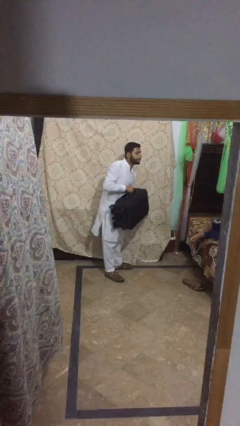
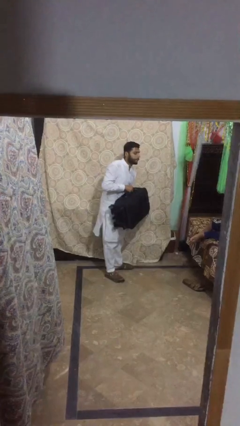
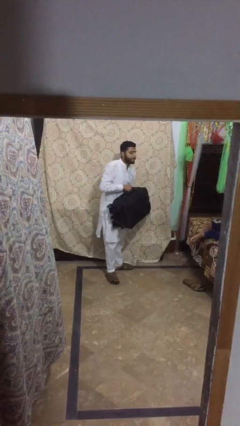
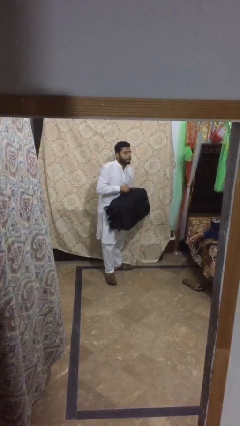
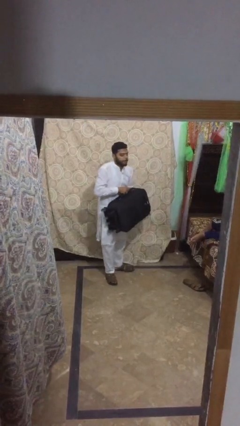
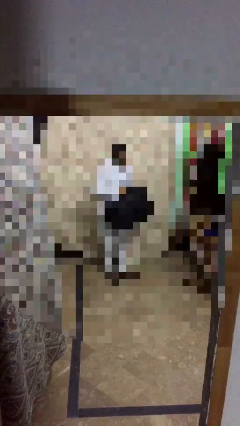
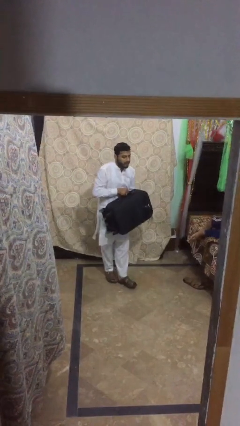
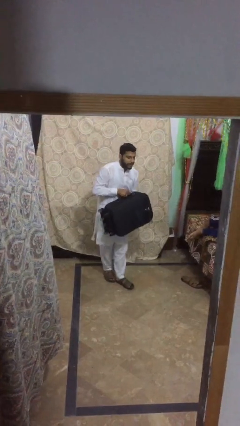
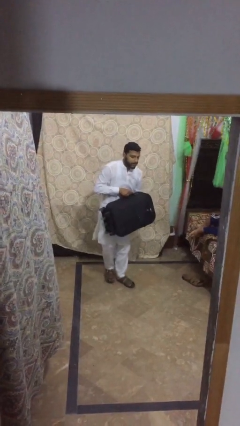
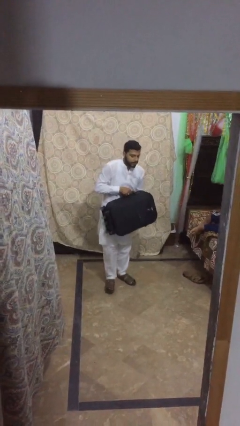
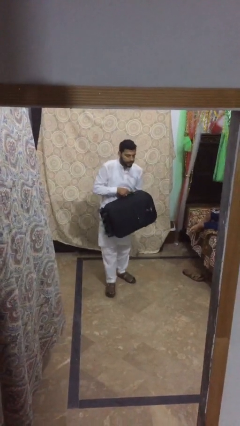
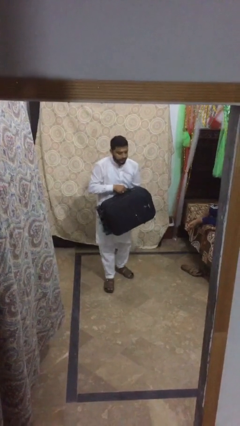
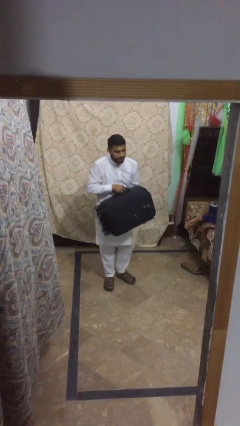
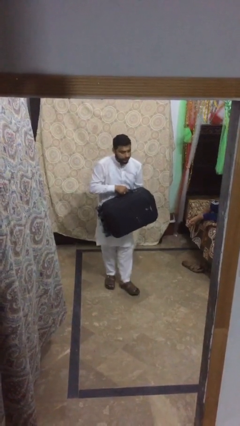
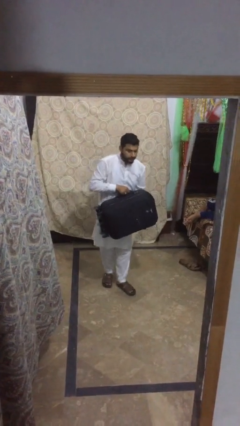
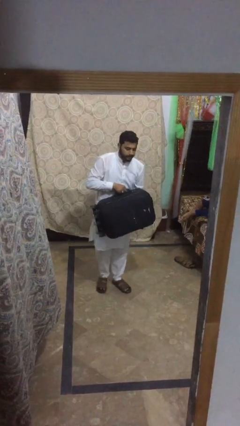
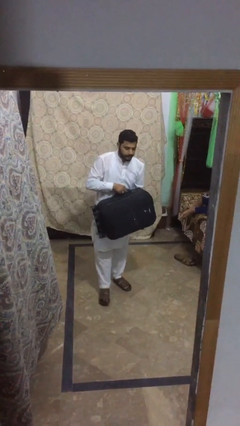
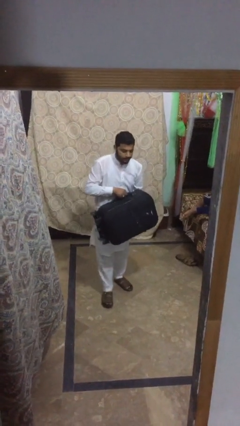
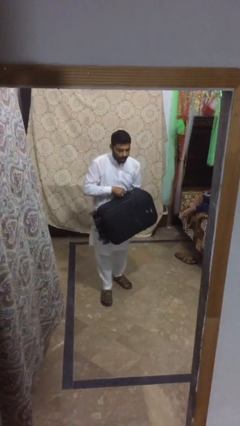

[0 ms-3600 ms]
person carries heavy object

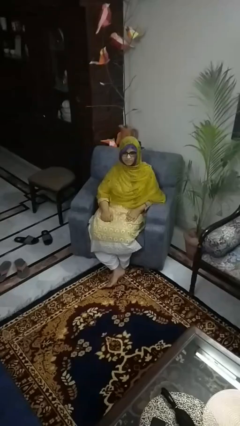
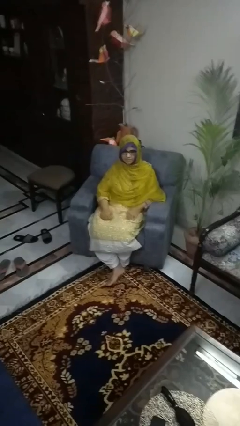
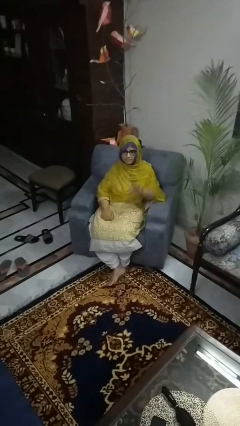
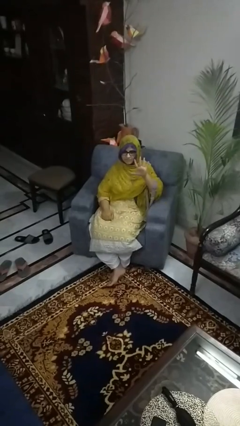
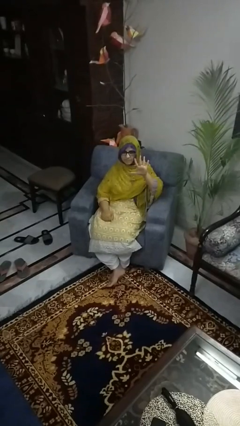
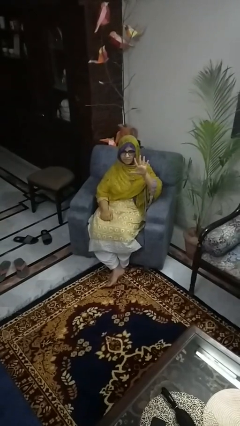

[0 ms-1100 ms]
person gestures number five

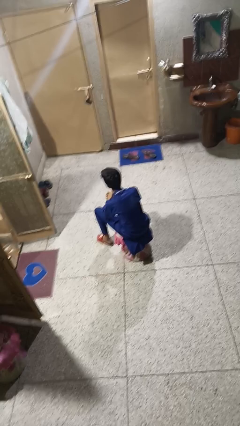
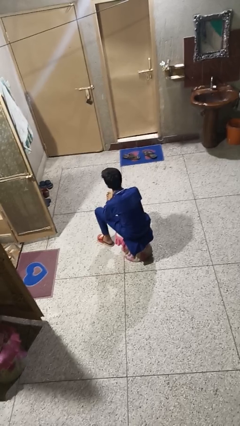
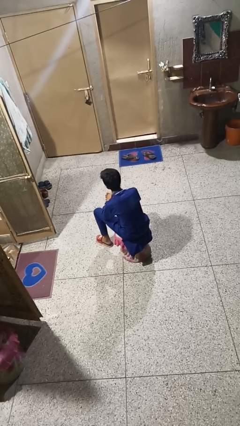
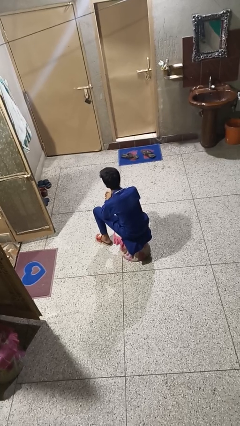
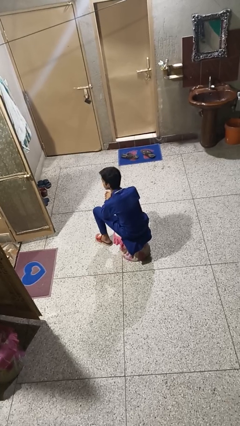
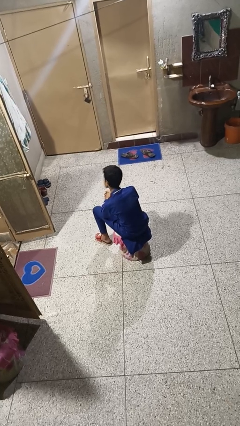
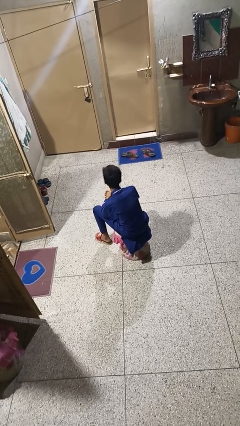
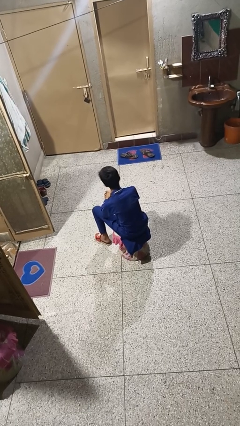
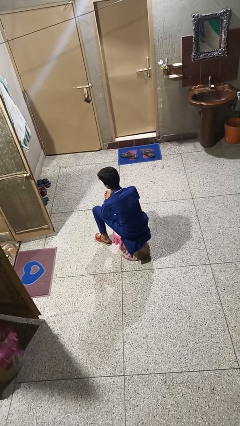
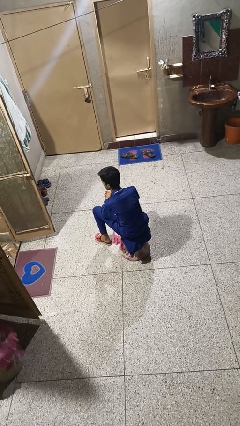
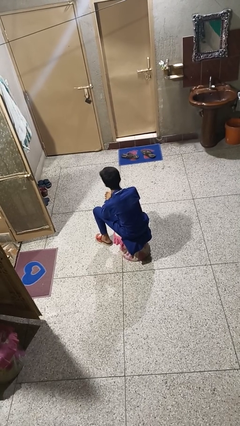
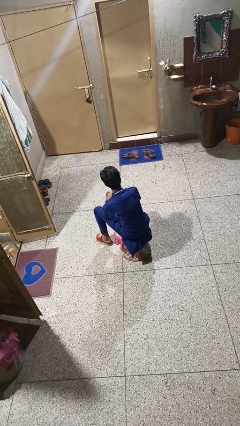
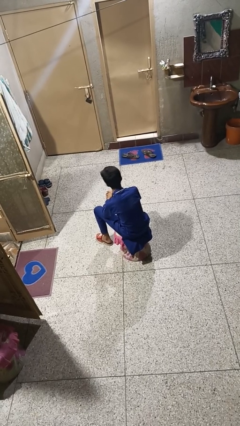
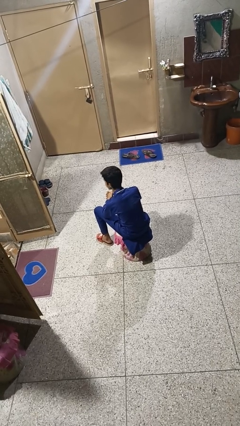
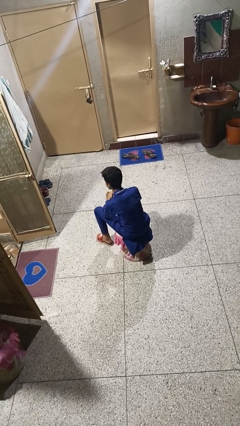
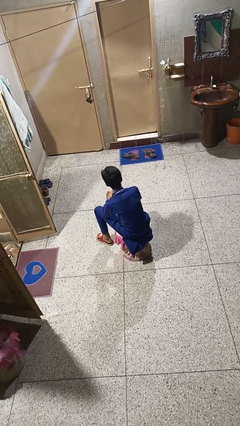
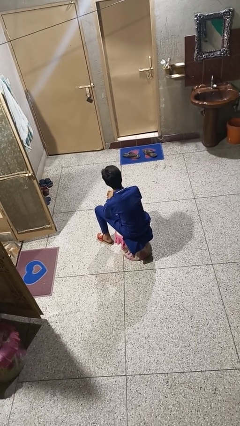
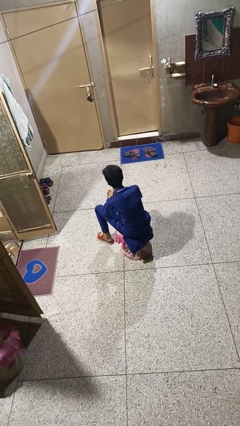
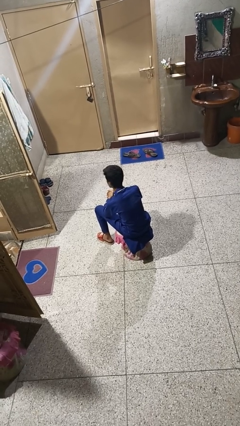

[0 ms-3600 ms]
person shakes head

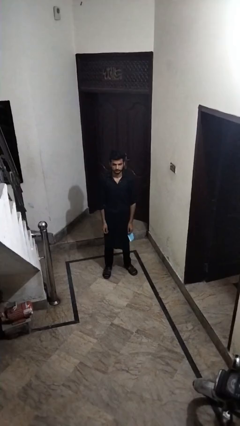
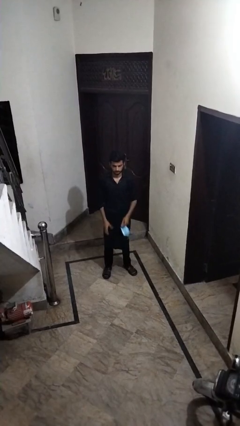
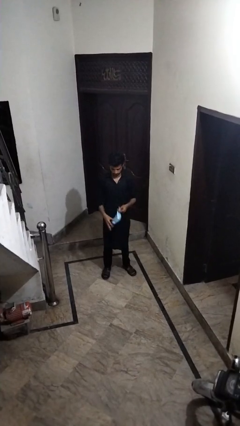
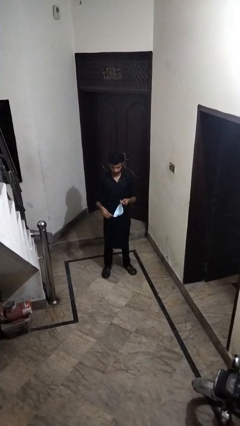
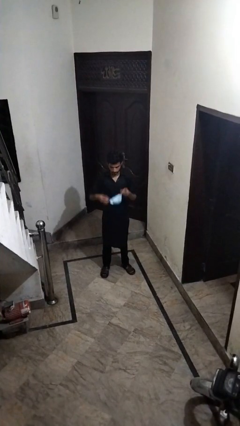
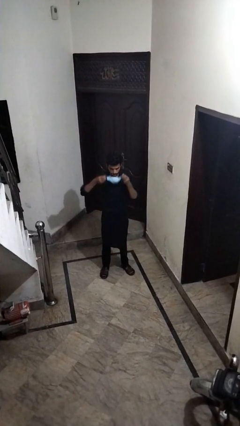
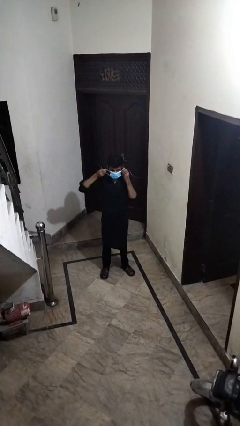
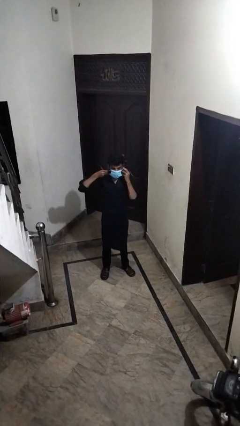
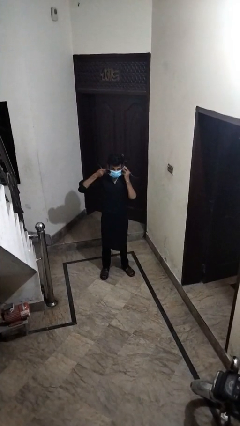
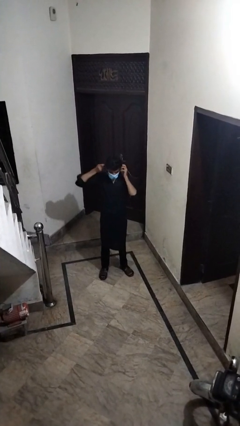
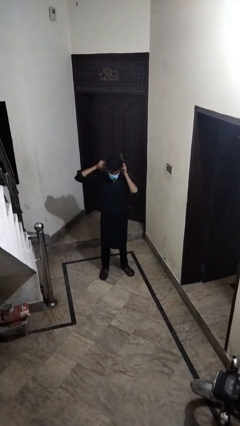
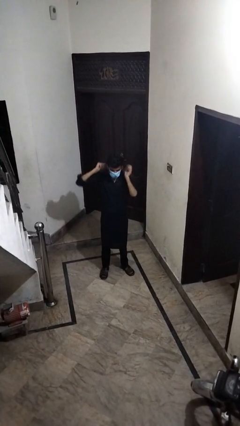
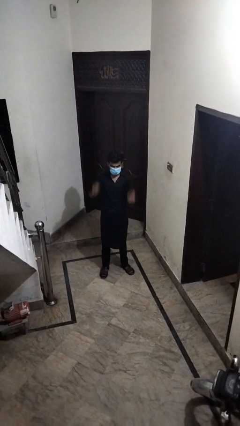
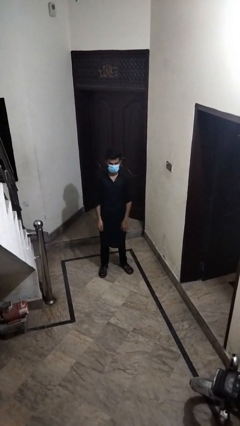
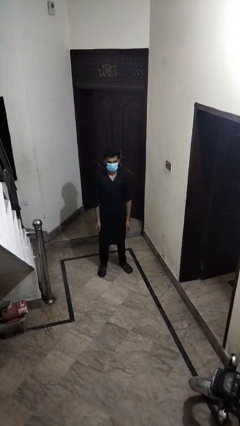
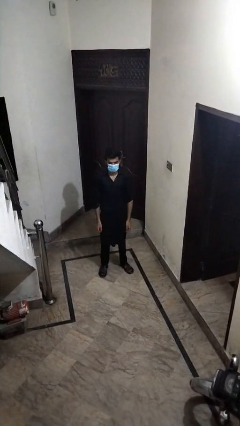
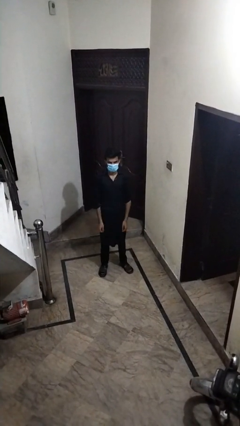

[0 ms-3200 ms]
person puts on facemask

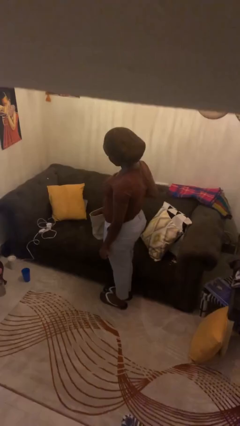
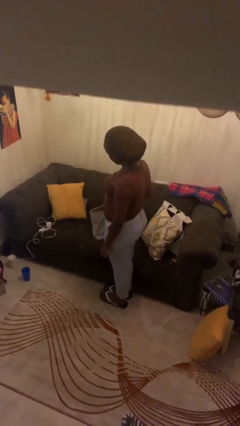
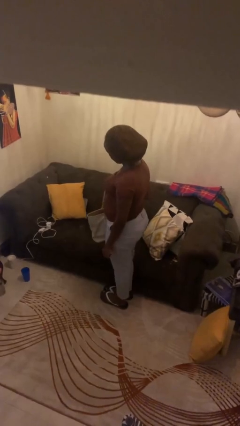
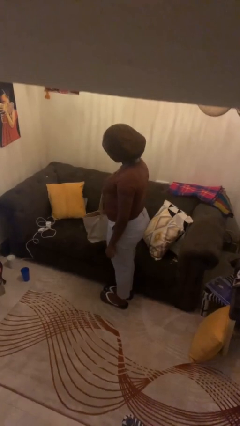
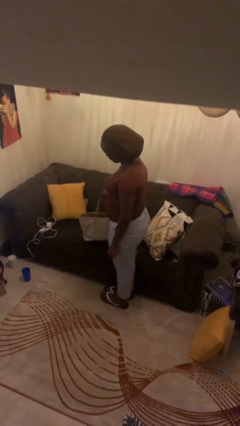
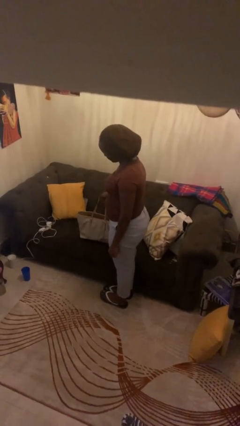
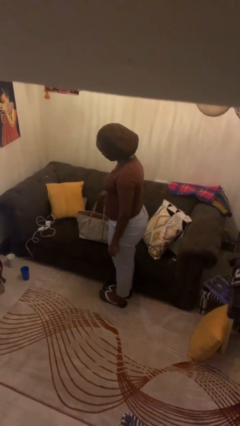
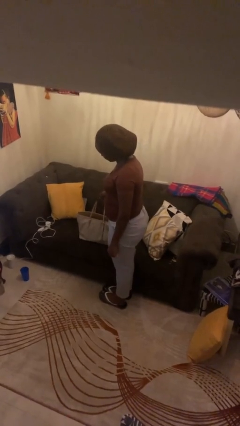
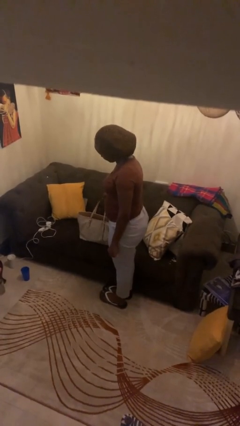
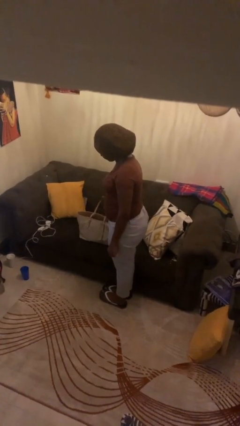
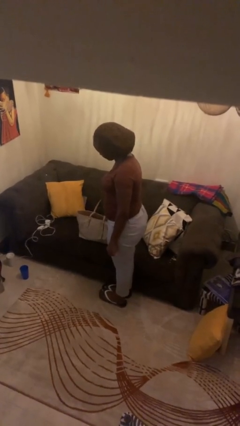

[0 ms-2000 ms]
person puts down object on couch

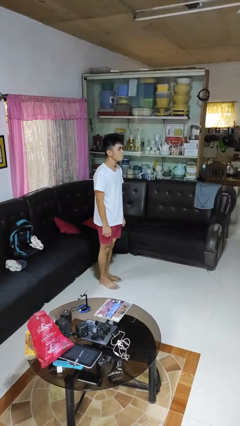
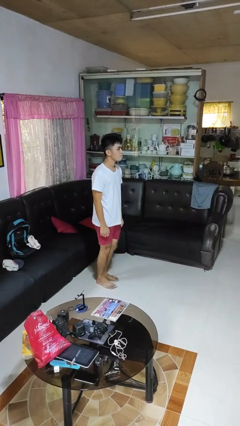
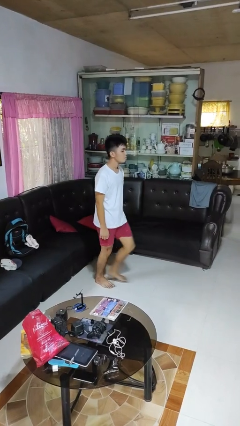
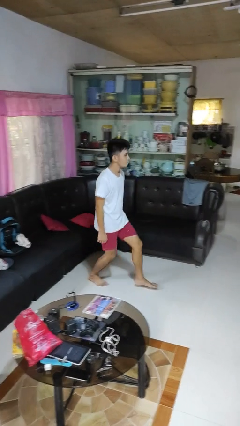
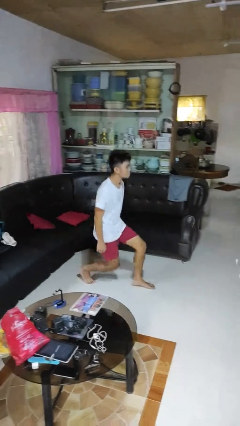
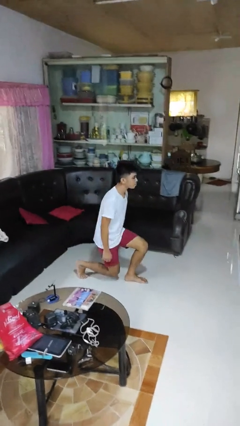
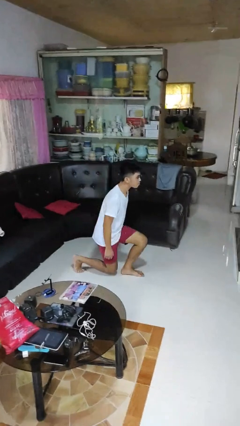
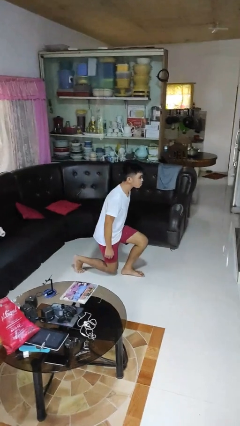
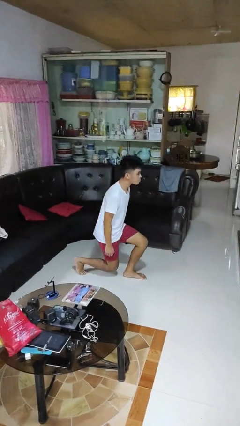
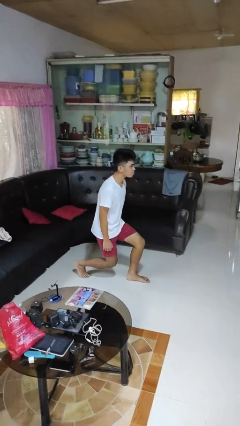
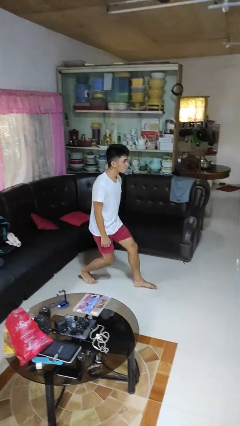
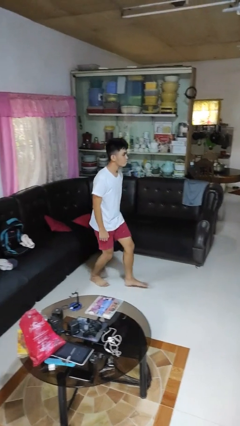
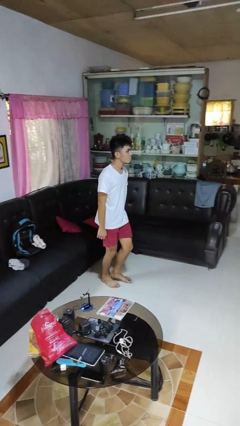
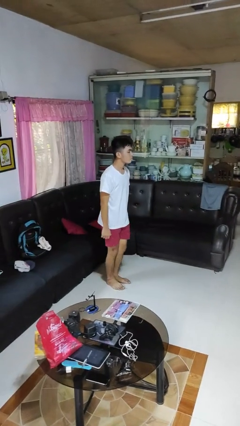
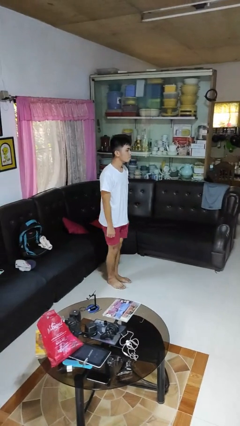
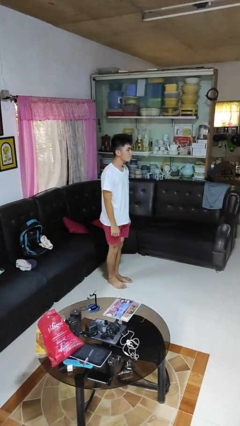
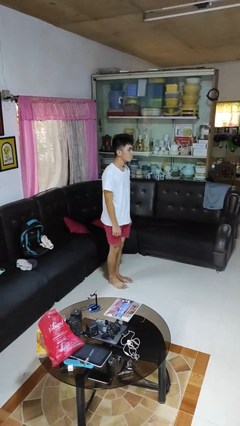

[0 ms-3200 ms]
person exercises with lunges

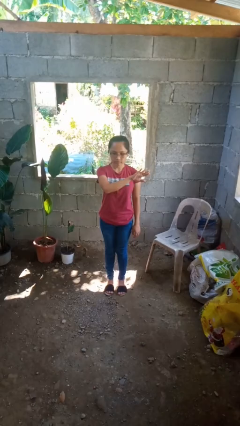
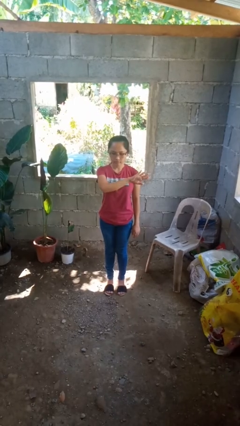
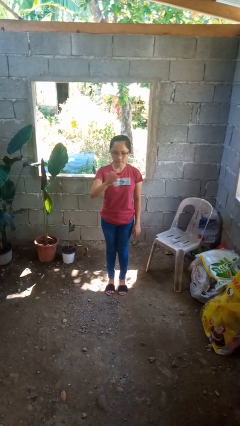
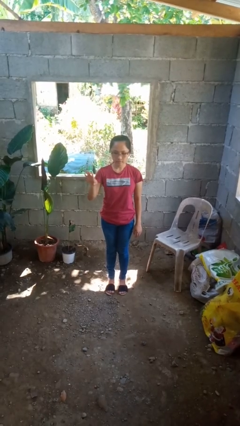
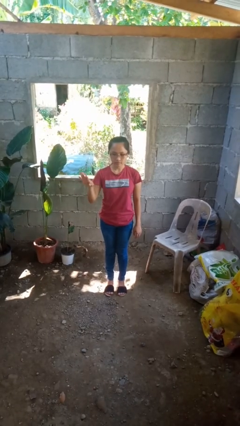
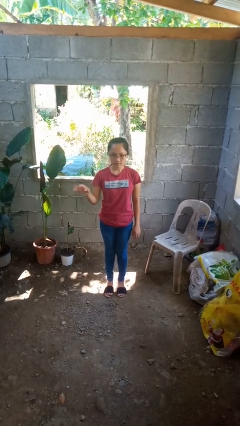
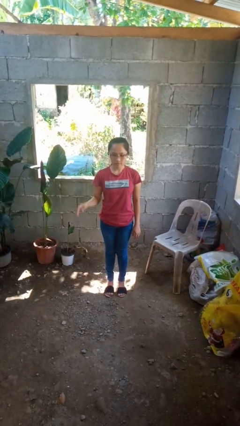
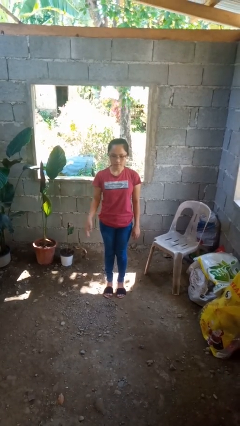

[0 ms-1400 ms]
person gestures swipe right
